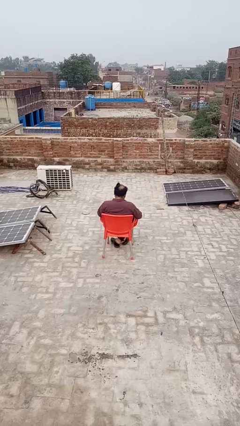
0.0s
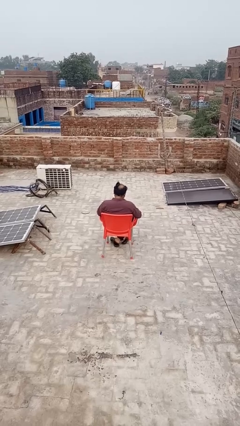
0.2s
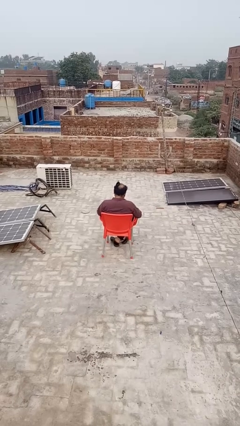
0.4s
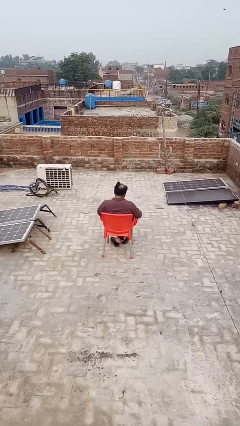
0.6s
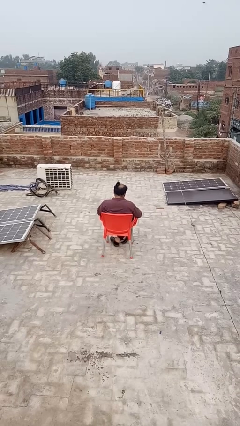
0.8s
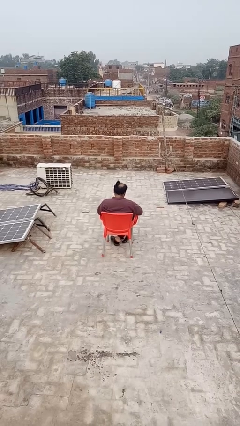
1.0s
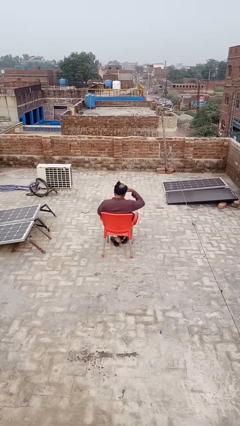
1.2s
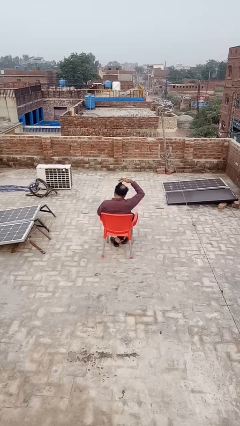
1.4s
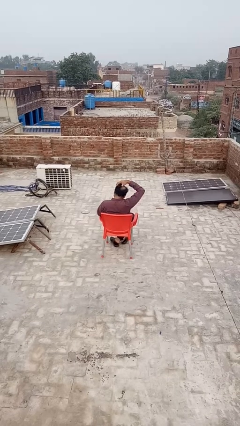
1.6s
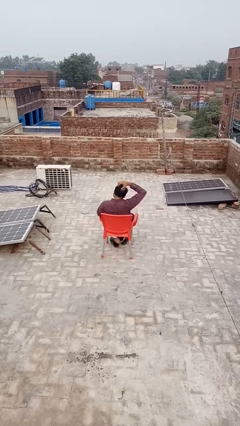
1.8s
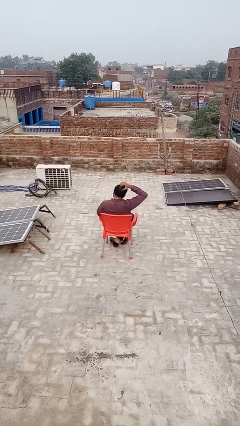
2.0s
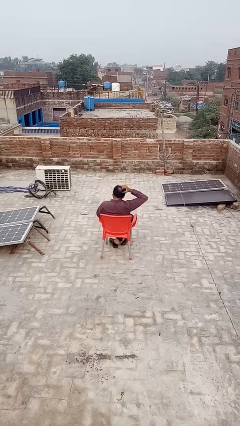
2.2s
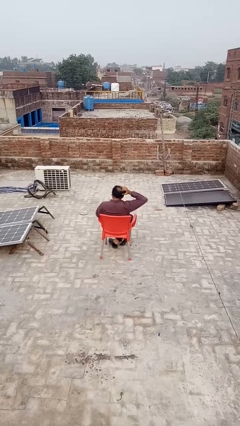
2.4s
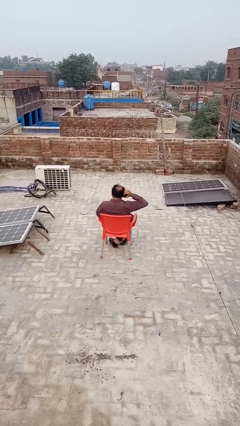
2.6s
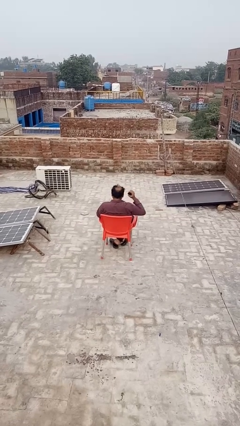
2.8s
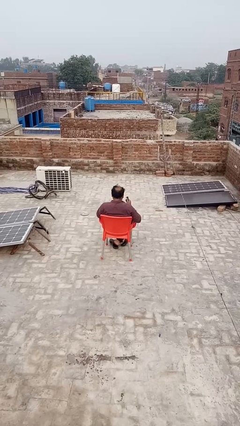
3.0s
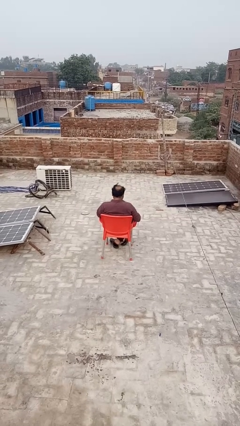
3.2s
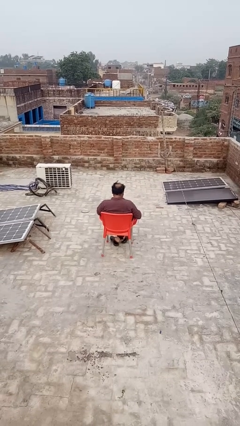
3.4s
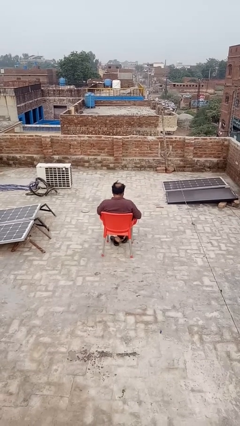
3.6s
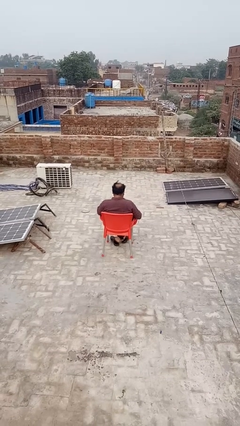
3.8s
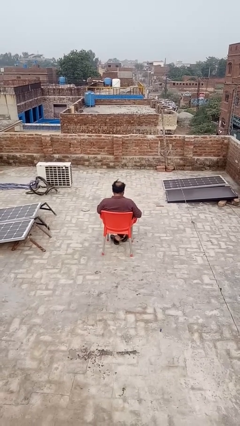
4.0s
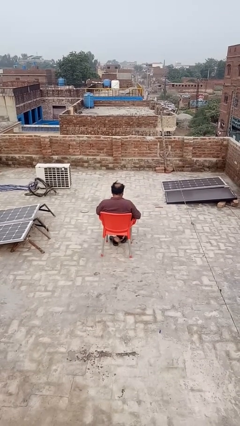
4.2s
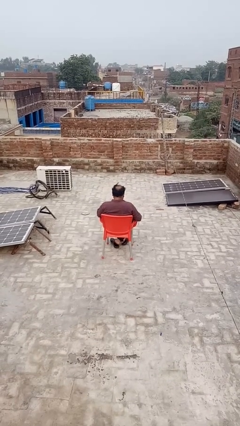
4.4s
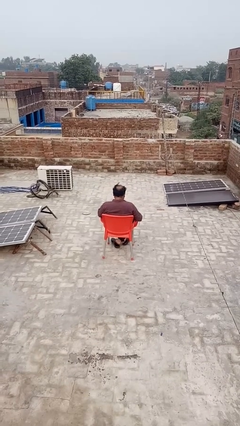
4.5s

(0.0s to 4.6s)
person takes off hairtie

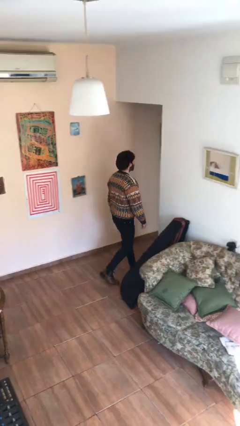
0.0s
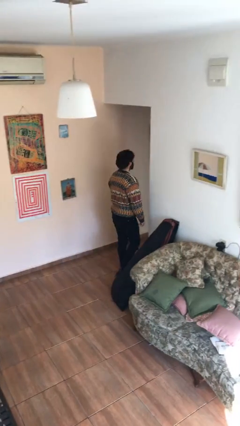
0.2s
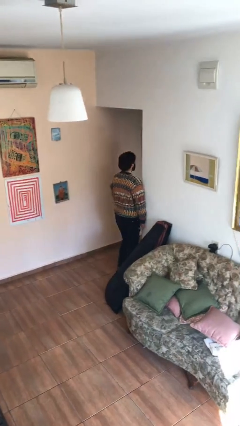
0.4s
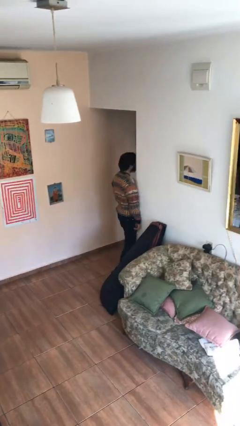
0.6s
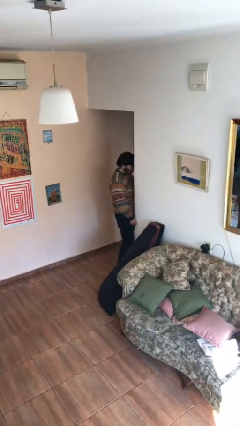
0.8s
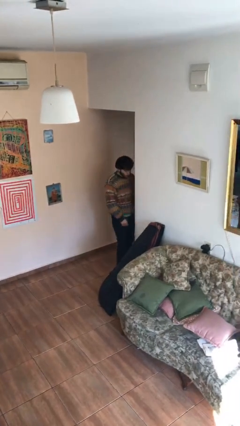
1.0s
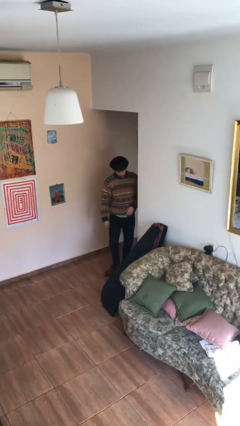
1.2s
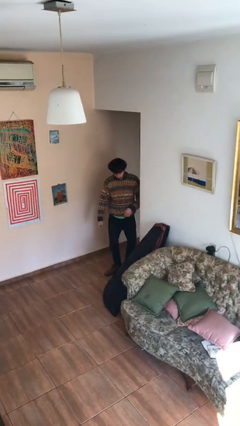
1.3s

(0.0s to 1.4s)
person bumps into wall

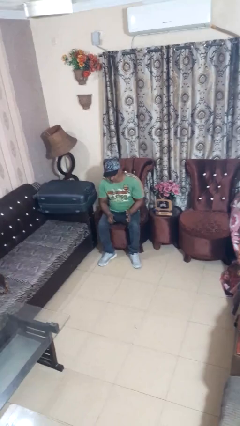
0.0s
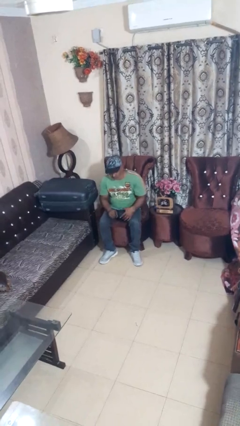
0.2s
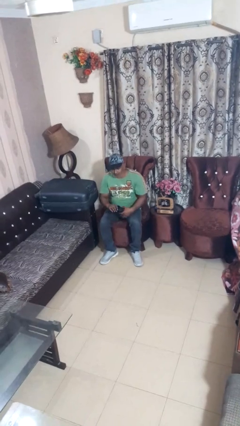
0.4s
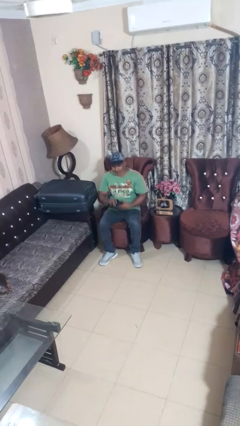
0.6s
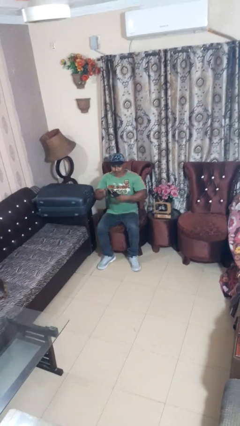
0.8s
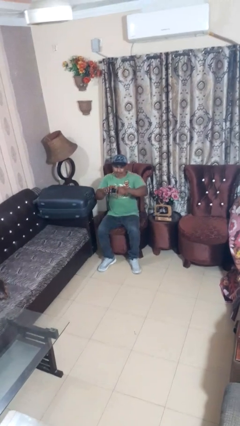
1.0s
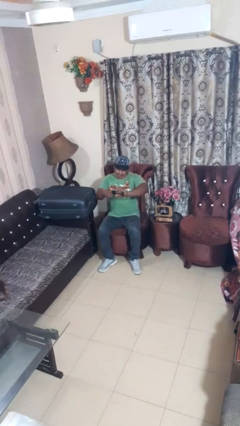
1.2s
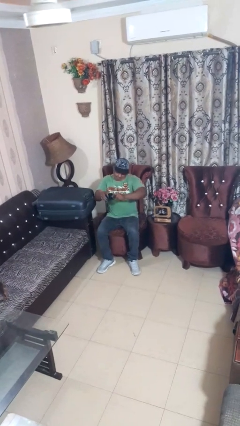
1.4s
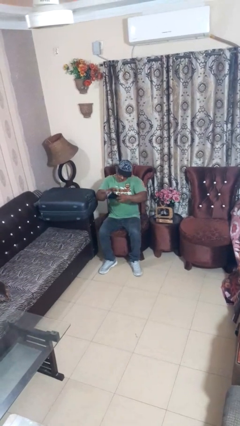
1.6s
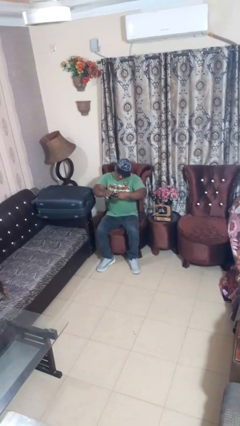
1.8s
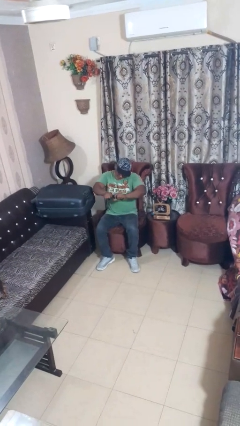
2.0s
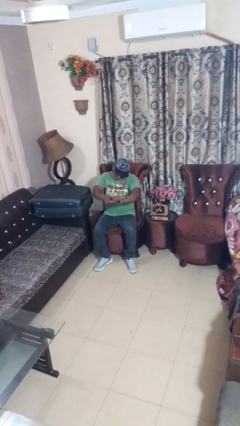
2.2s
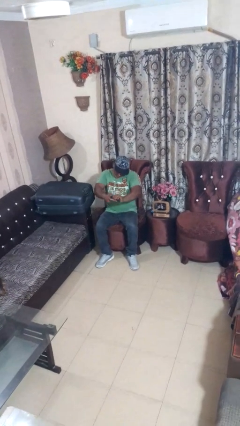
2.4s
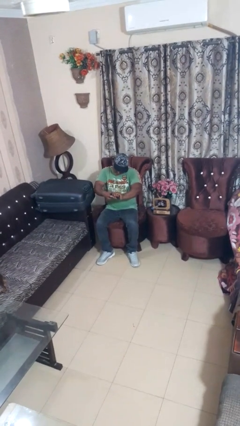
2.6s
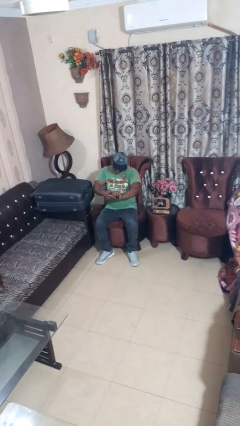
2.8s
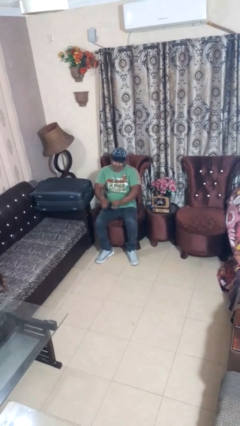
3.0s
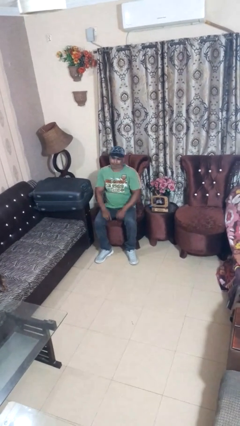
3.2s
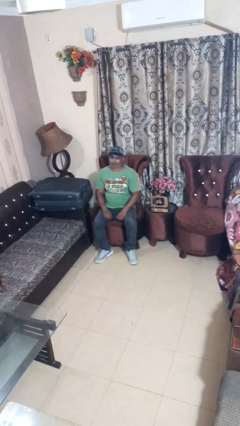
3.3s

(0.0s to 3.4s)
person squeezes object

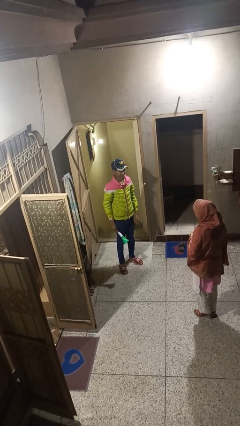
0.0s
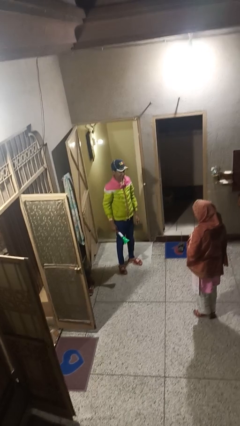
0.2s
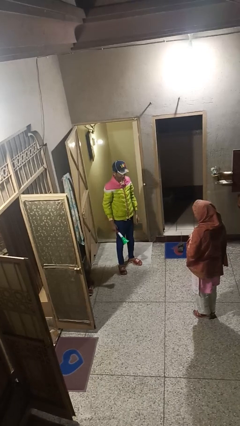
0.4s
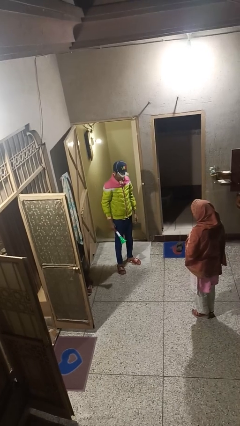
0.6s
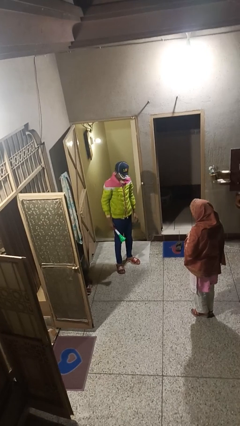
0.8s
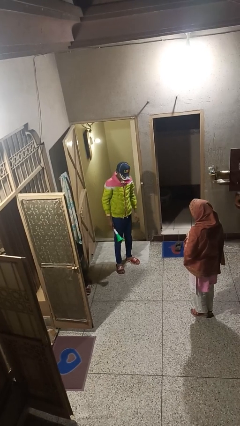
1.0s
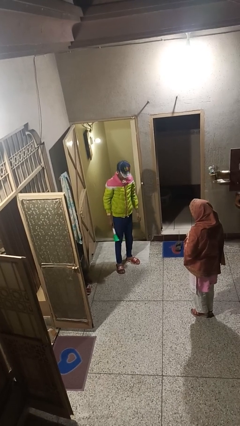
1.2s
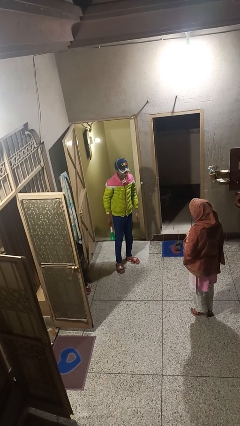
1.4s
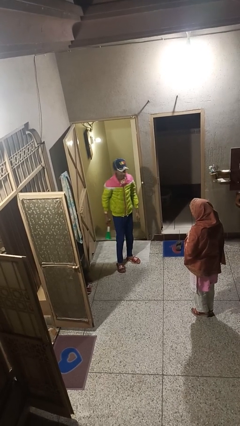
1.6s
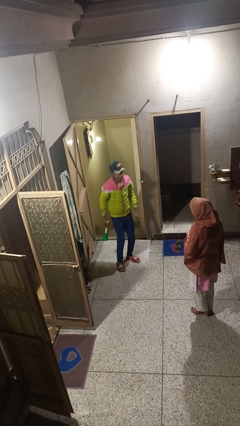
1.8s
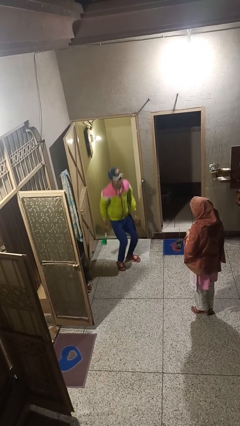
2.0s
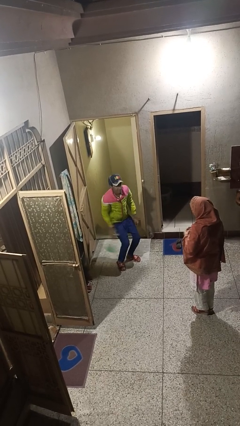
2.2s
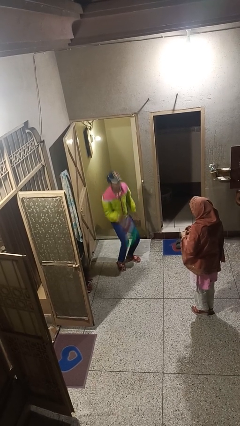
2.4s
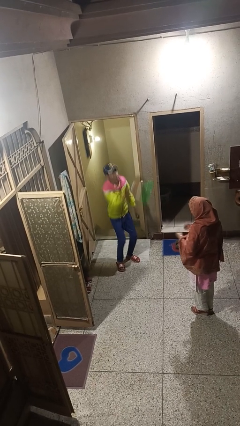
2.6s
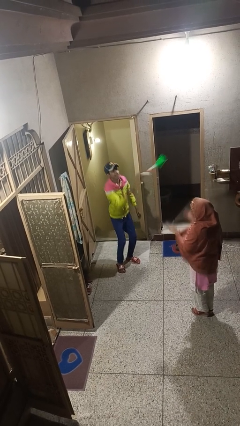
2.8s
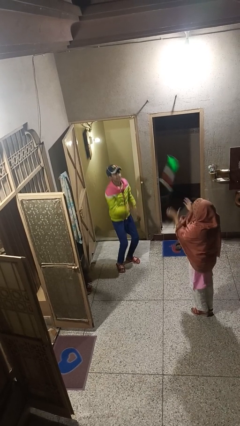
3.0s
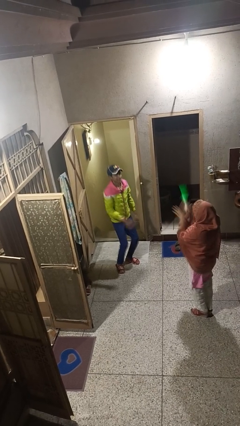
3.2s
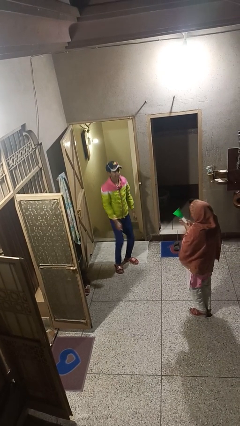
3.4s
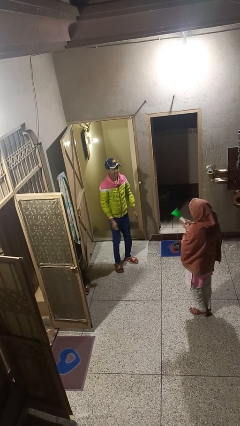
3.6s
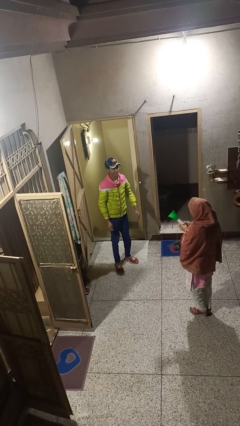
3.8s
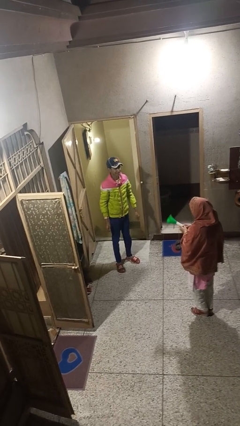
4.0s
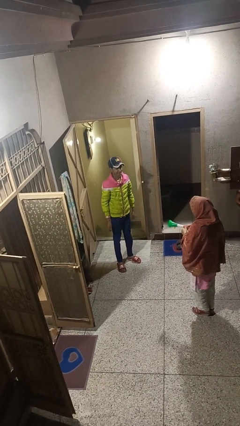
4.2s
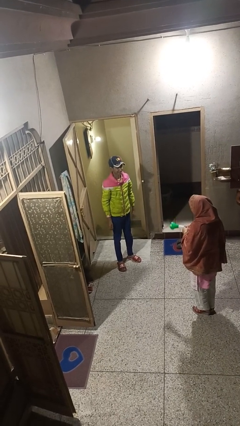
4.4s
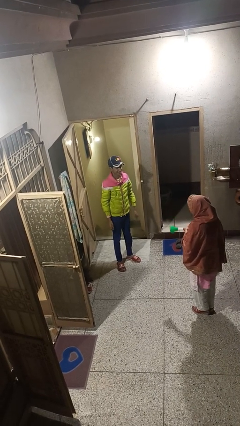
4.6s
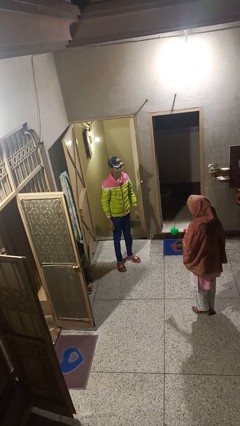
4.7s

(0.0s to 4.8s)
person throws object to person

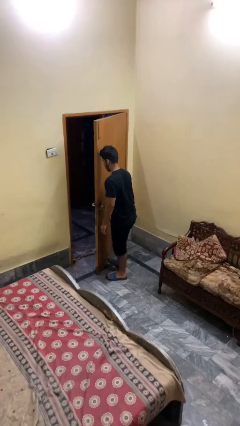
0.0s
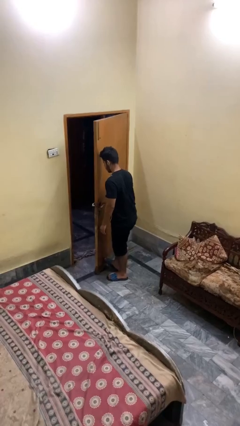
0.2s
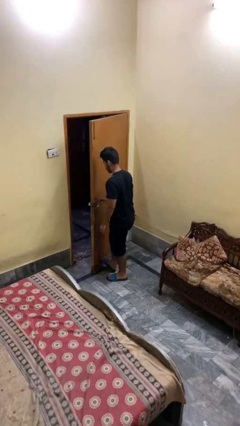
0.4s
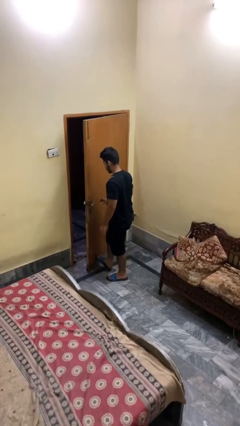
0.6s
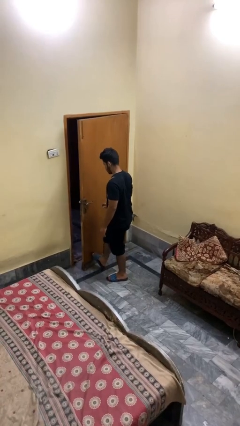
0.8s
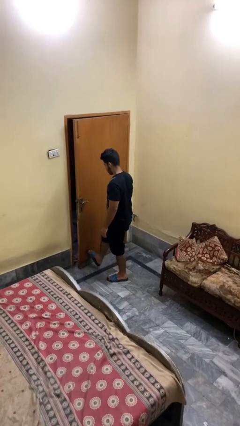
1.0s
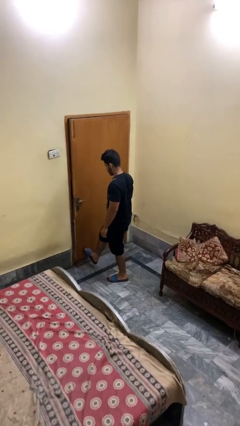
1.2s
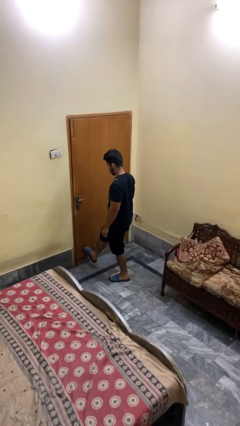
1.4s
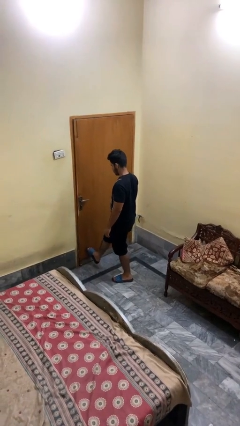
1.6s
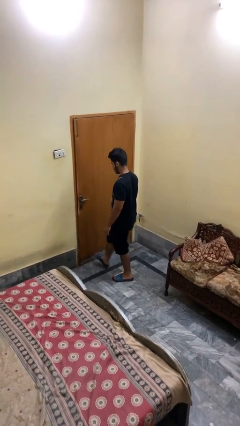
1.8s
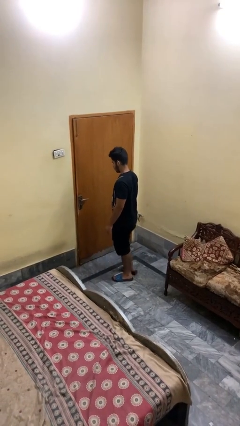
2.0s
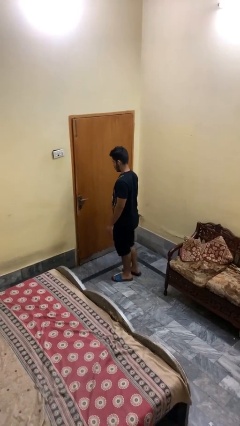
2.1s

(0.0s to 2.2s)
person closes door with foot

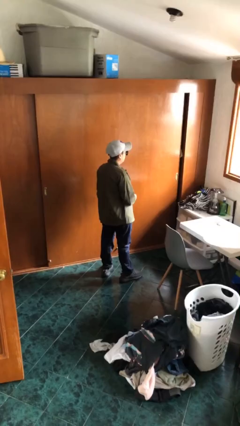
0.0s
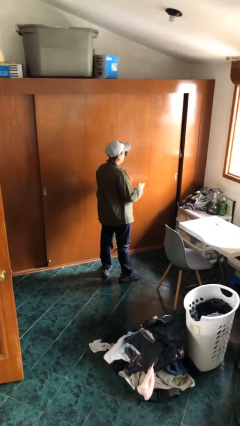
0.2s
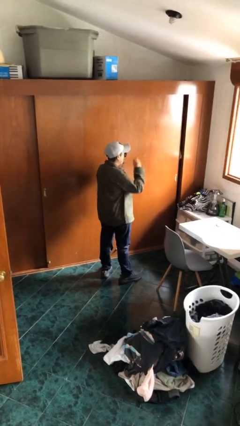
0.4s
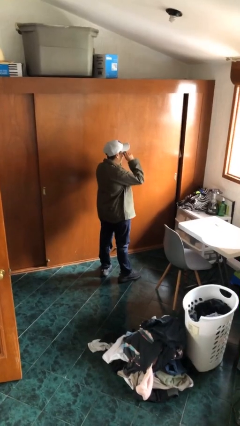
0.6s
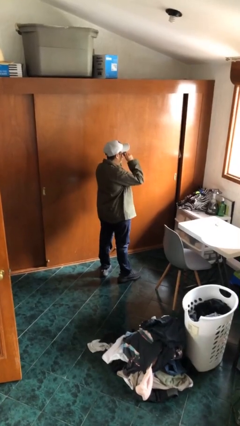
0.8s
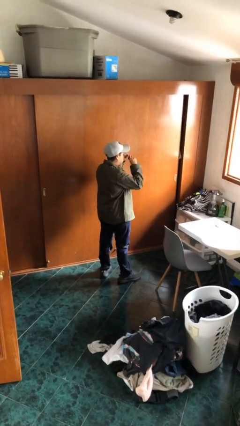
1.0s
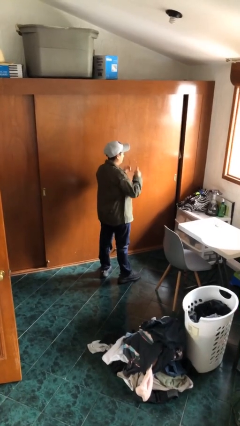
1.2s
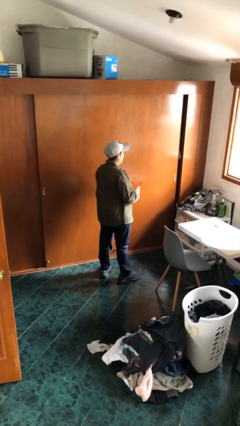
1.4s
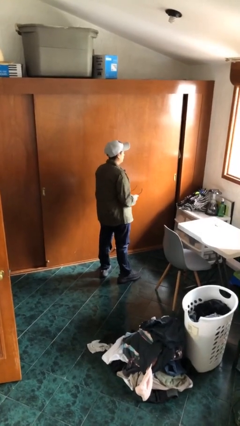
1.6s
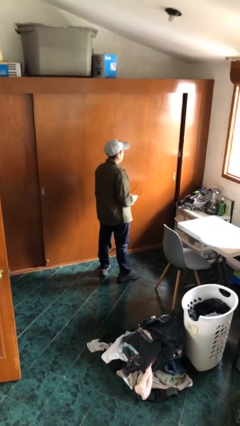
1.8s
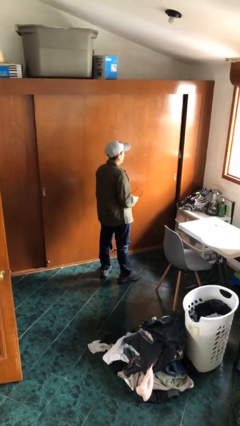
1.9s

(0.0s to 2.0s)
person takes off sunglasses
